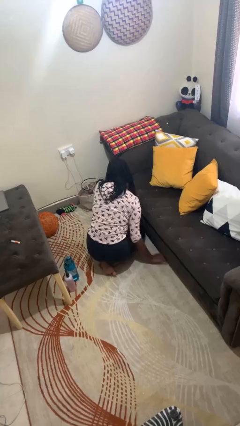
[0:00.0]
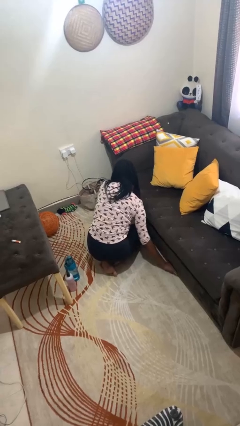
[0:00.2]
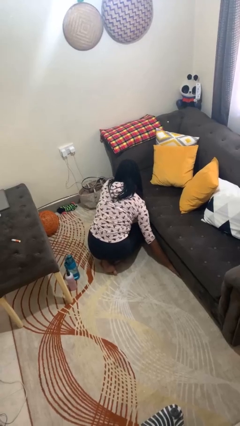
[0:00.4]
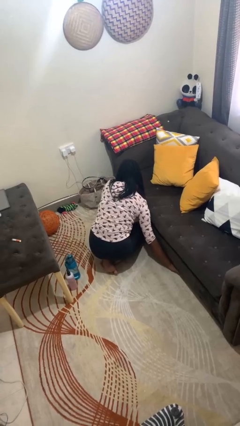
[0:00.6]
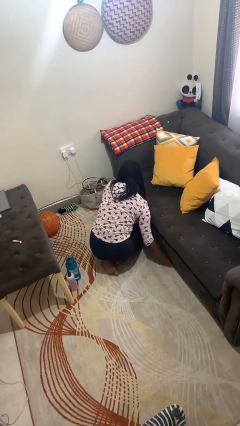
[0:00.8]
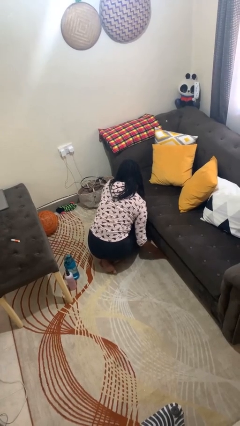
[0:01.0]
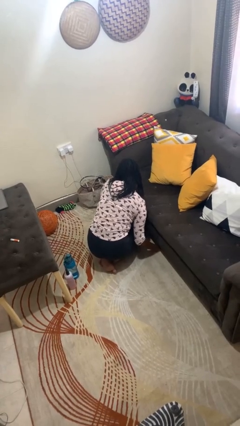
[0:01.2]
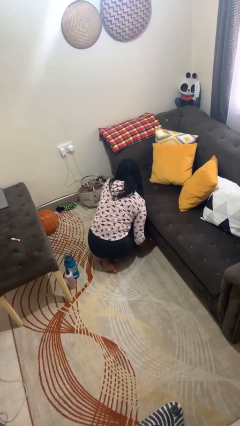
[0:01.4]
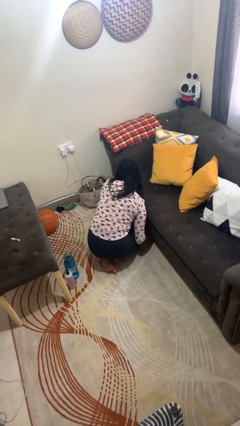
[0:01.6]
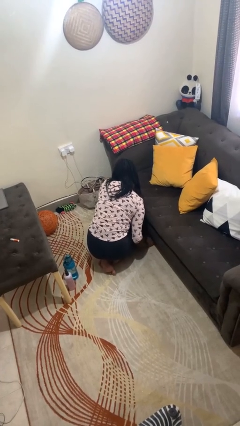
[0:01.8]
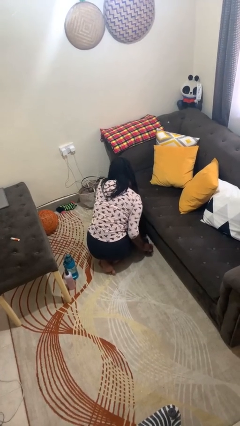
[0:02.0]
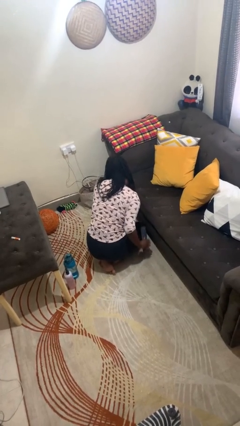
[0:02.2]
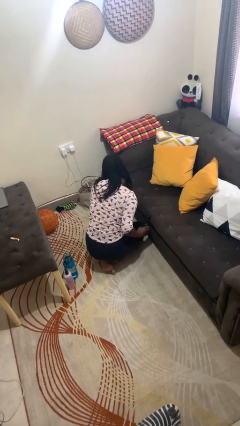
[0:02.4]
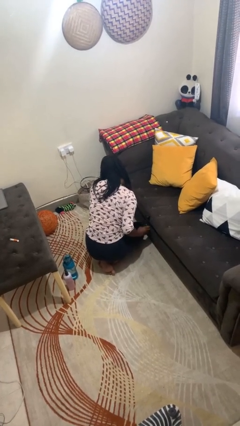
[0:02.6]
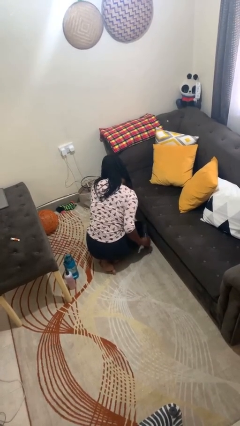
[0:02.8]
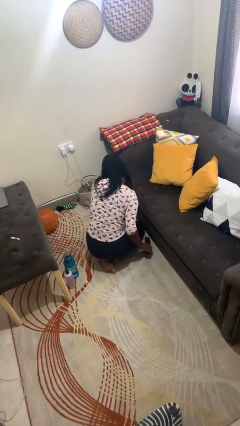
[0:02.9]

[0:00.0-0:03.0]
person searches under couch

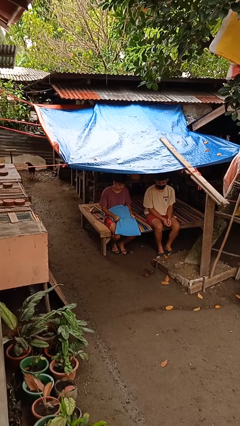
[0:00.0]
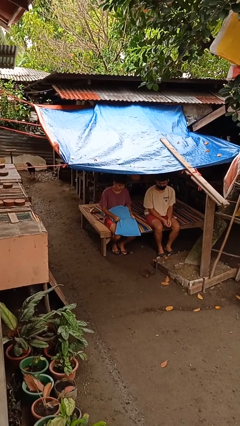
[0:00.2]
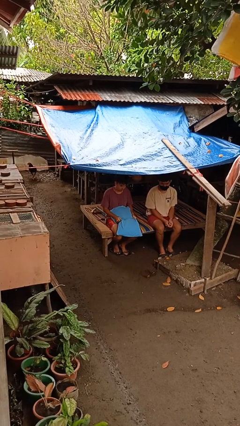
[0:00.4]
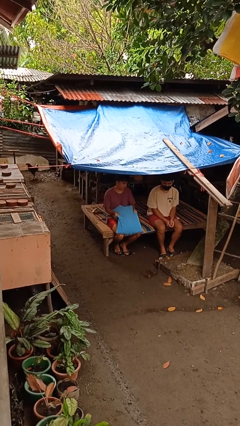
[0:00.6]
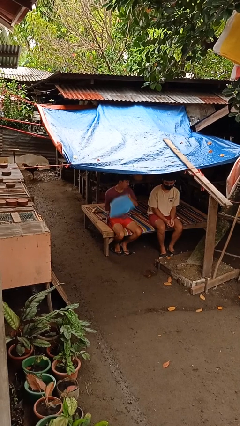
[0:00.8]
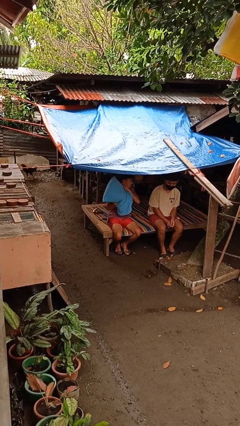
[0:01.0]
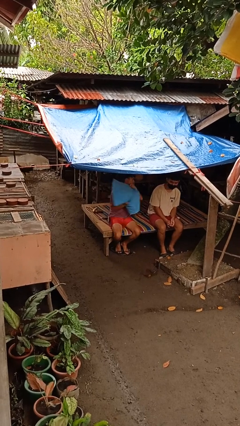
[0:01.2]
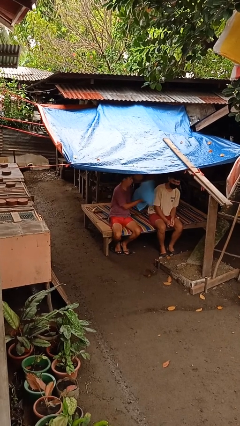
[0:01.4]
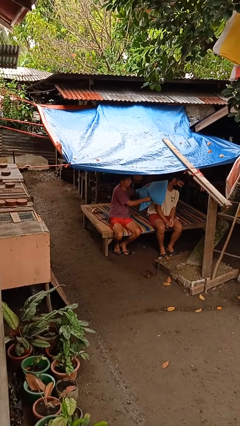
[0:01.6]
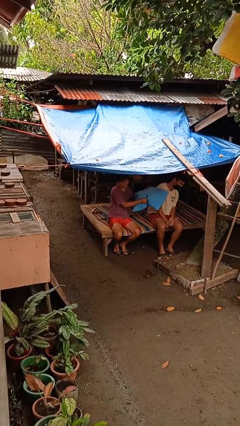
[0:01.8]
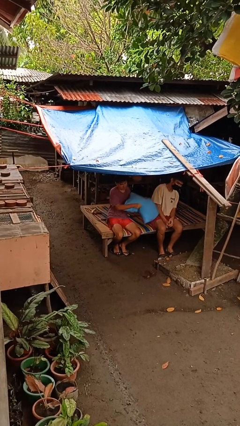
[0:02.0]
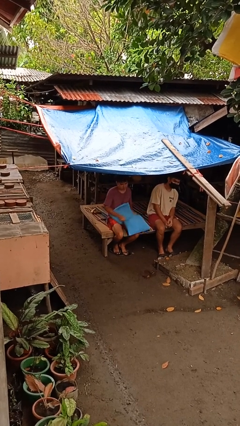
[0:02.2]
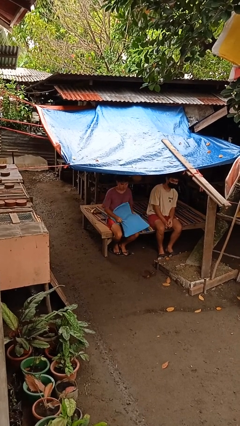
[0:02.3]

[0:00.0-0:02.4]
person hits person with pillow

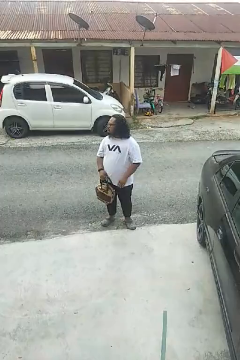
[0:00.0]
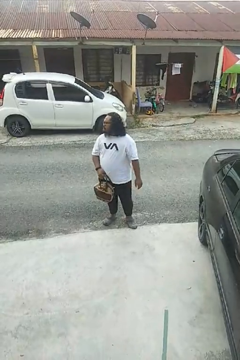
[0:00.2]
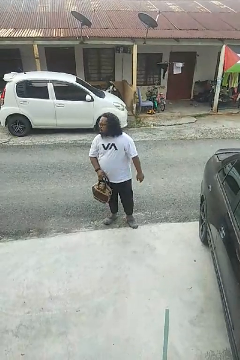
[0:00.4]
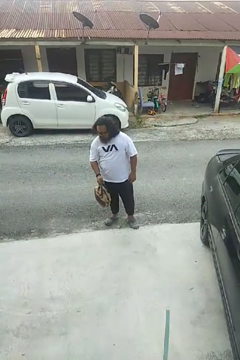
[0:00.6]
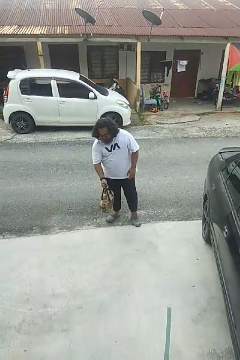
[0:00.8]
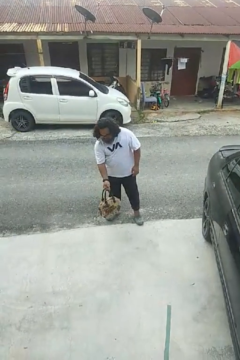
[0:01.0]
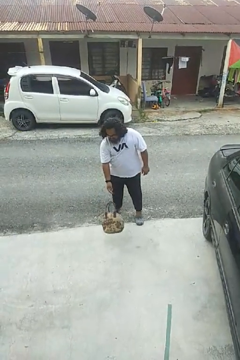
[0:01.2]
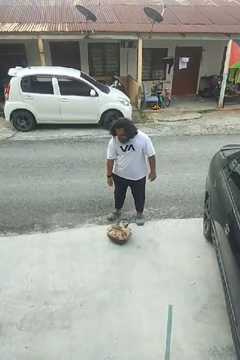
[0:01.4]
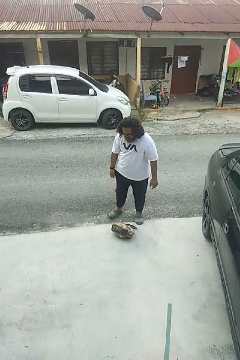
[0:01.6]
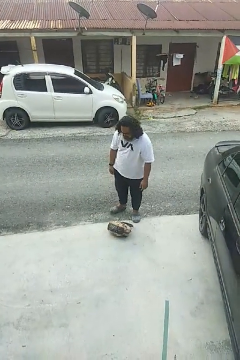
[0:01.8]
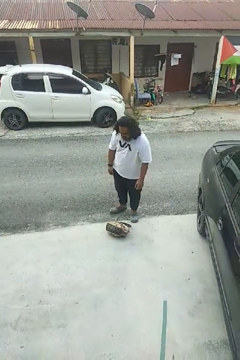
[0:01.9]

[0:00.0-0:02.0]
person drops object

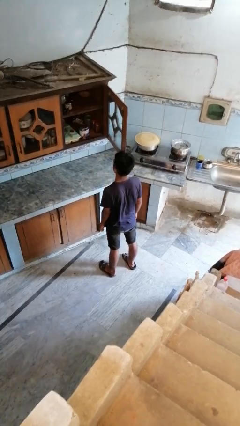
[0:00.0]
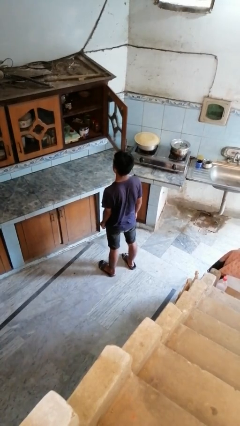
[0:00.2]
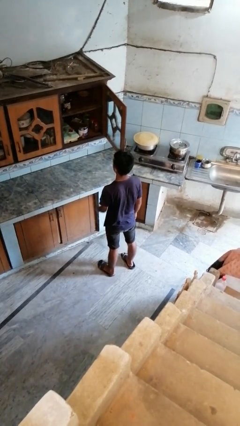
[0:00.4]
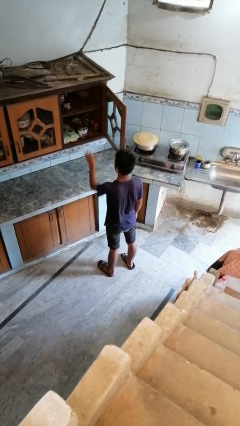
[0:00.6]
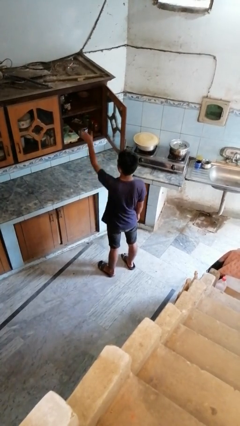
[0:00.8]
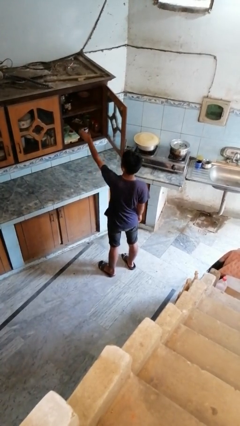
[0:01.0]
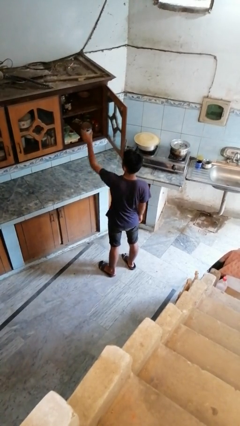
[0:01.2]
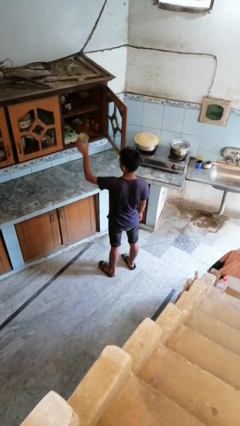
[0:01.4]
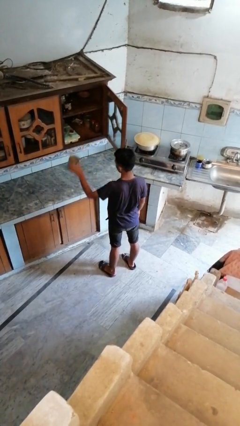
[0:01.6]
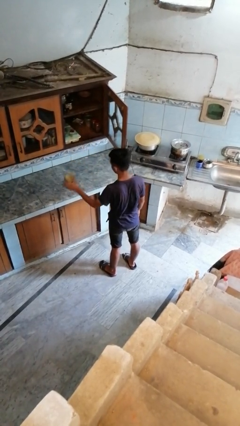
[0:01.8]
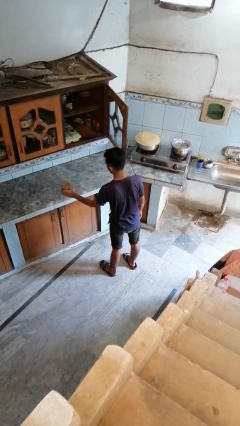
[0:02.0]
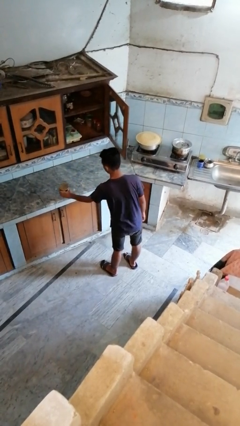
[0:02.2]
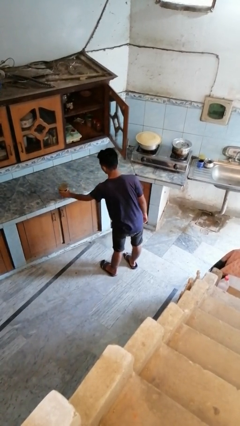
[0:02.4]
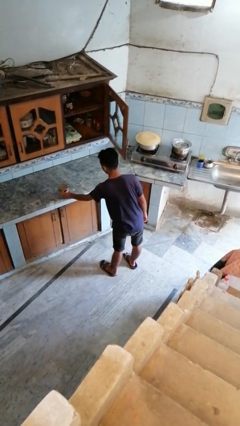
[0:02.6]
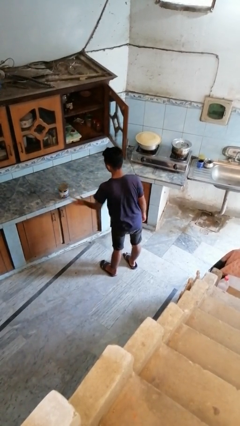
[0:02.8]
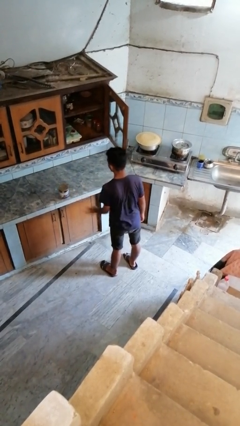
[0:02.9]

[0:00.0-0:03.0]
person takes object from cabinet

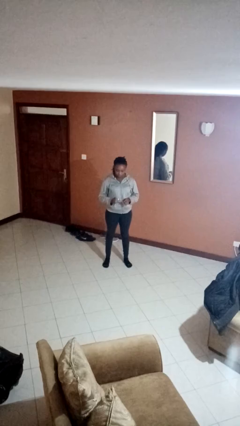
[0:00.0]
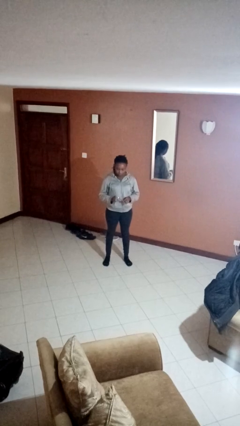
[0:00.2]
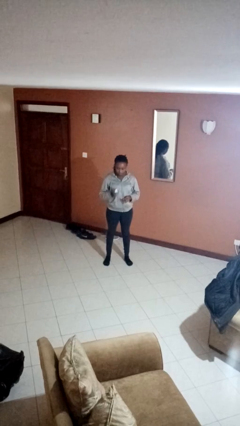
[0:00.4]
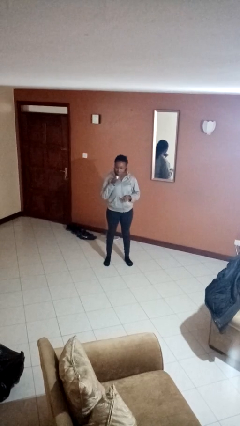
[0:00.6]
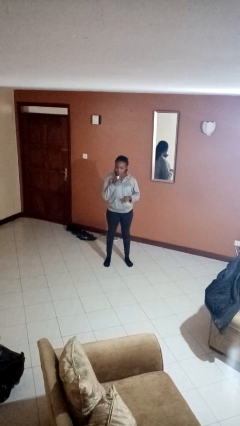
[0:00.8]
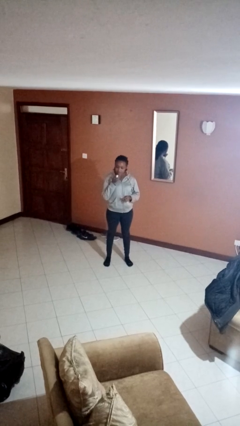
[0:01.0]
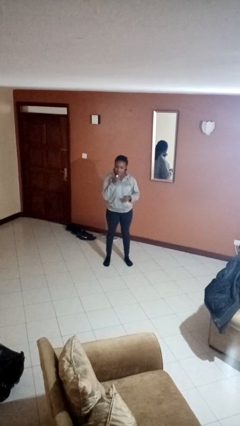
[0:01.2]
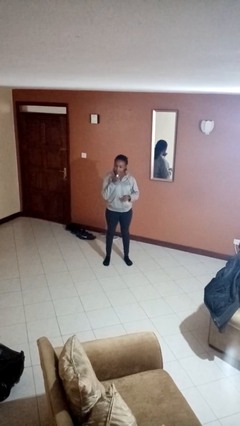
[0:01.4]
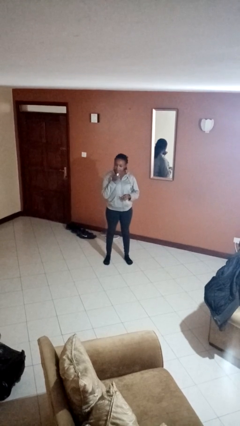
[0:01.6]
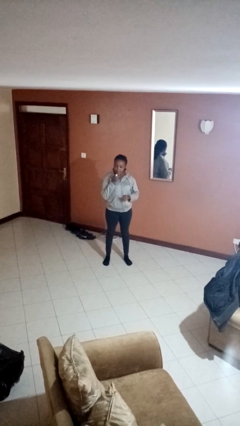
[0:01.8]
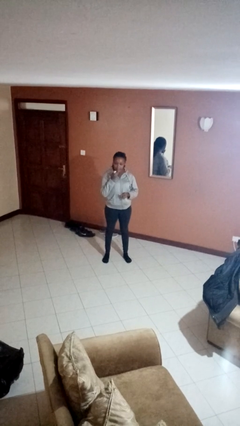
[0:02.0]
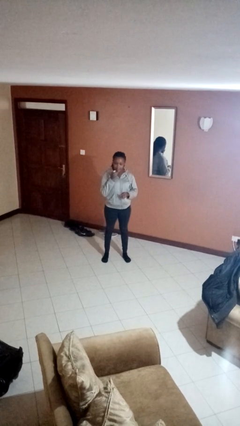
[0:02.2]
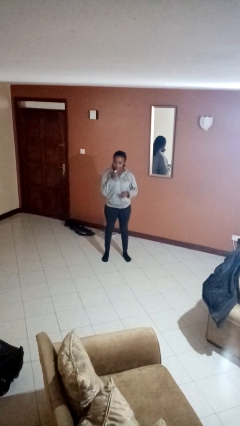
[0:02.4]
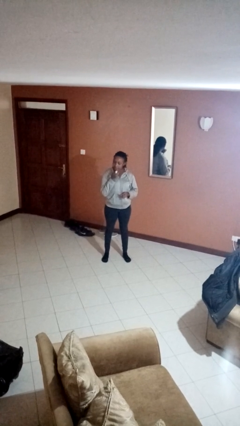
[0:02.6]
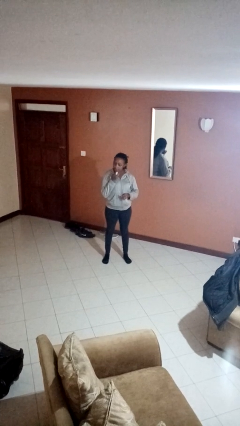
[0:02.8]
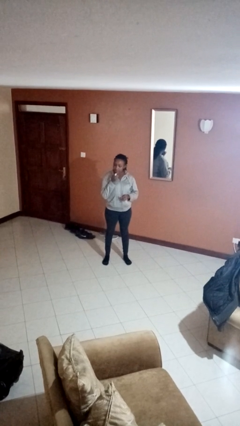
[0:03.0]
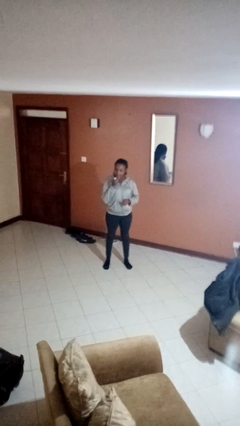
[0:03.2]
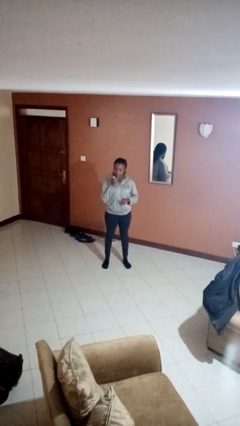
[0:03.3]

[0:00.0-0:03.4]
person applies lip makeup

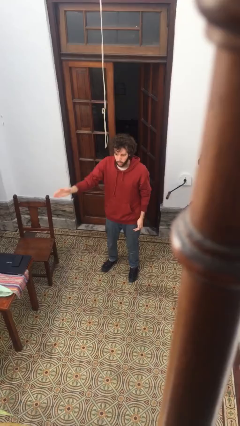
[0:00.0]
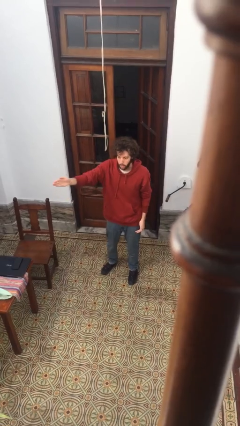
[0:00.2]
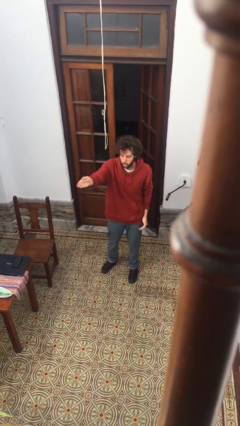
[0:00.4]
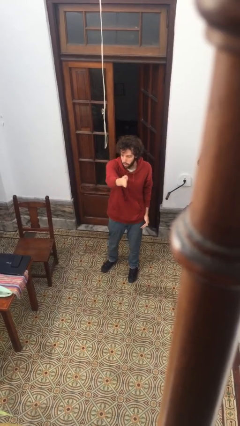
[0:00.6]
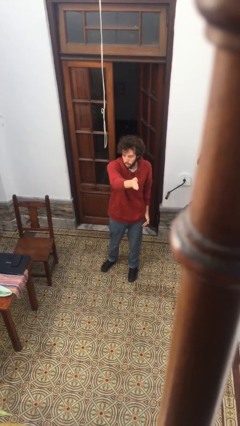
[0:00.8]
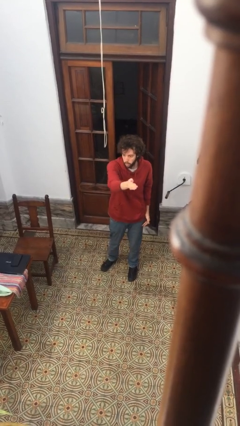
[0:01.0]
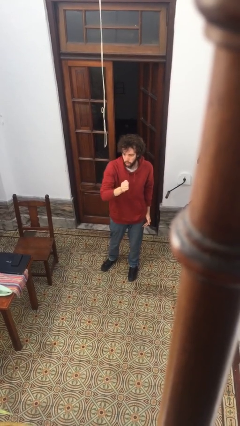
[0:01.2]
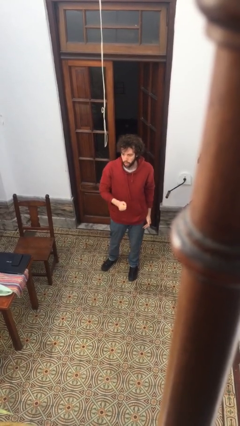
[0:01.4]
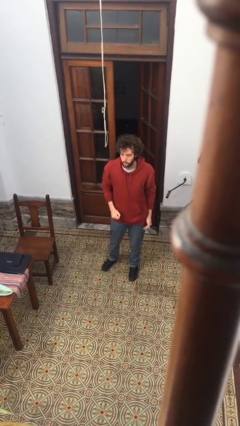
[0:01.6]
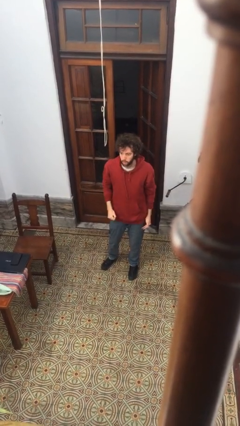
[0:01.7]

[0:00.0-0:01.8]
person gestures swipe left

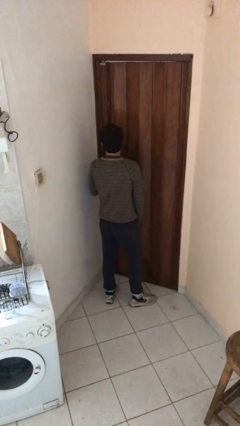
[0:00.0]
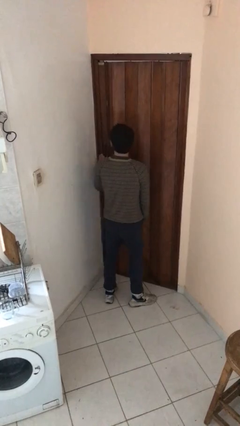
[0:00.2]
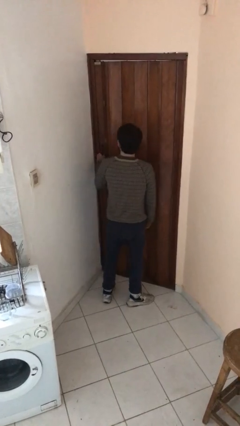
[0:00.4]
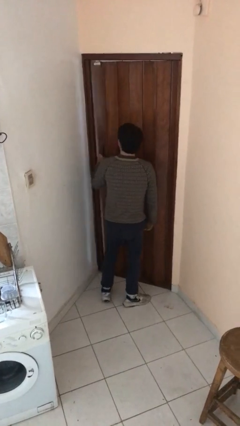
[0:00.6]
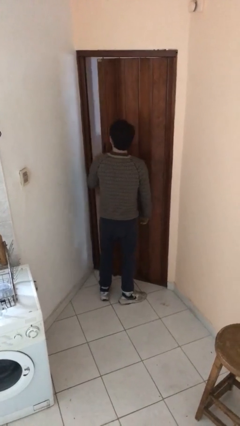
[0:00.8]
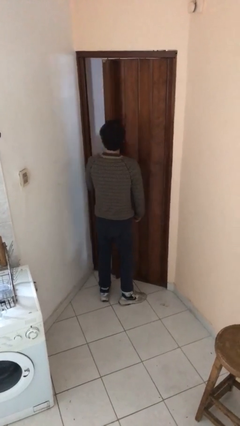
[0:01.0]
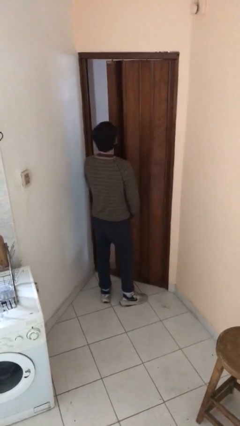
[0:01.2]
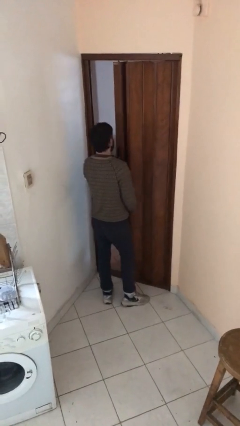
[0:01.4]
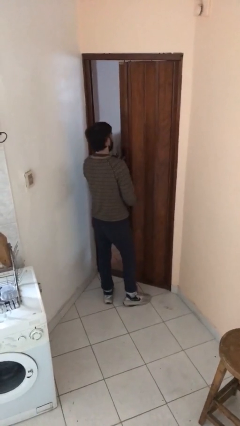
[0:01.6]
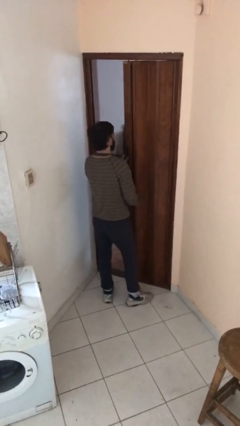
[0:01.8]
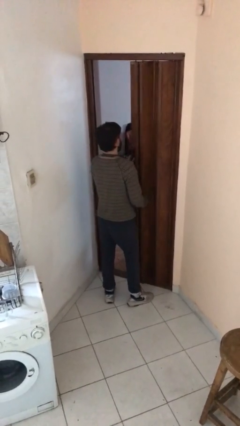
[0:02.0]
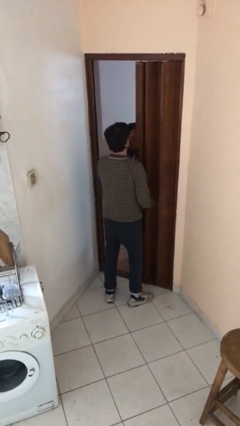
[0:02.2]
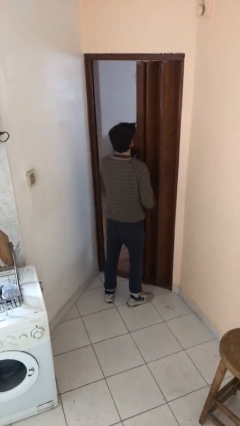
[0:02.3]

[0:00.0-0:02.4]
person opens sliding door
